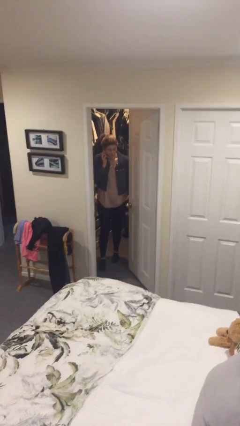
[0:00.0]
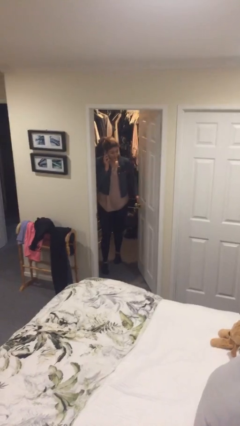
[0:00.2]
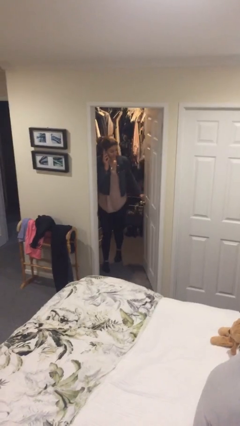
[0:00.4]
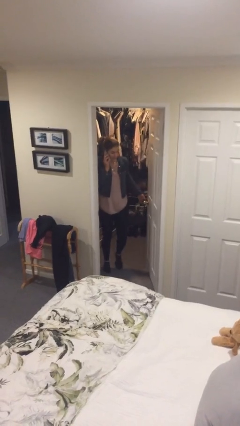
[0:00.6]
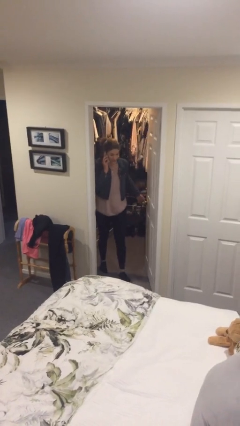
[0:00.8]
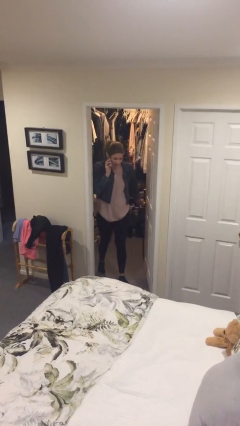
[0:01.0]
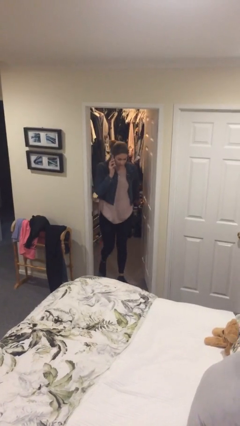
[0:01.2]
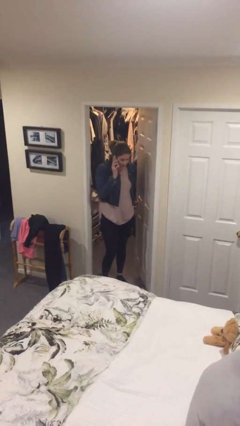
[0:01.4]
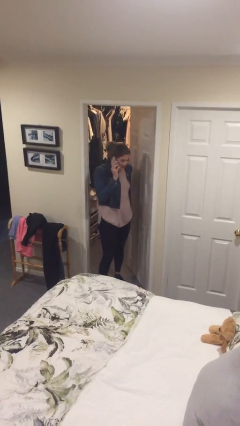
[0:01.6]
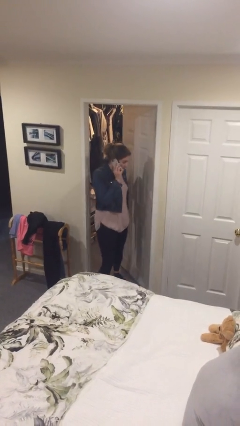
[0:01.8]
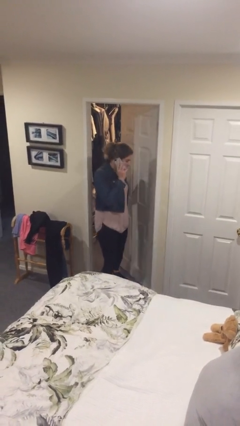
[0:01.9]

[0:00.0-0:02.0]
person enters scene through structure

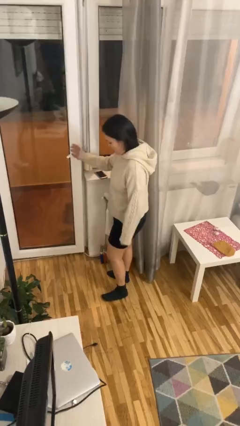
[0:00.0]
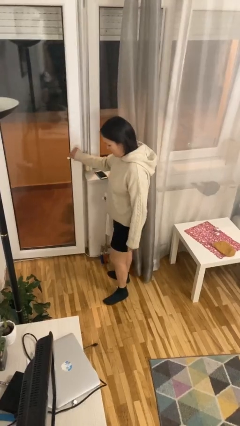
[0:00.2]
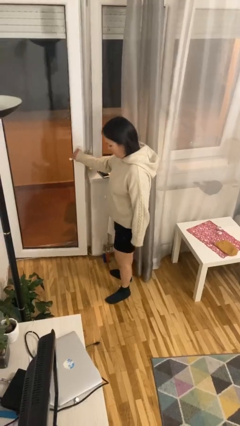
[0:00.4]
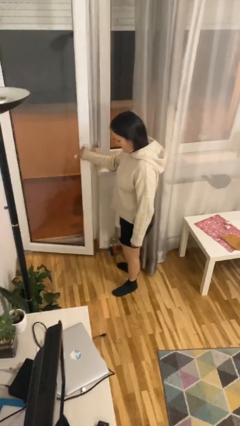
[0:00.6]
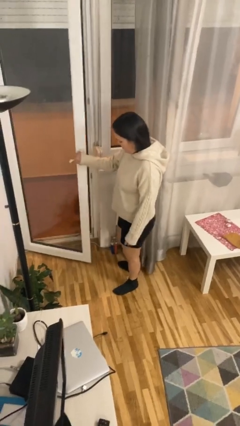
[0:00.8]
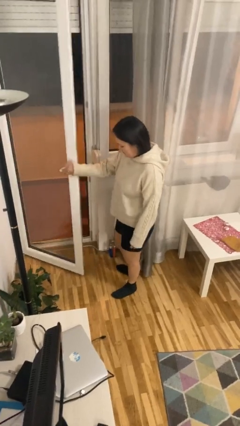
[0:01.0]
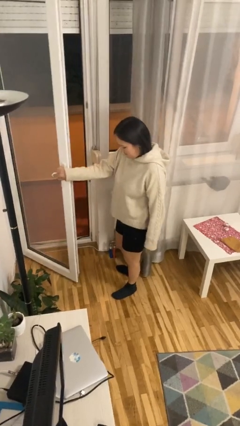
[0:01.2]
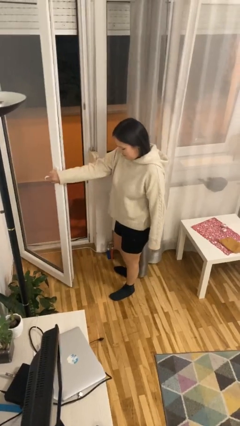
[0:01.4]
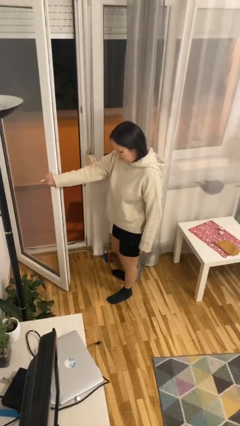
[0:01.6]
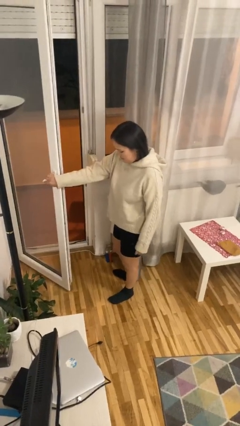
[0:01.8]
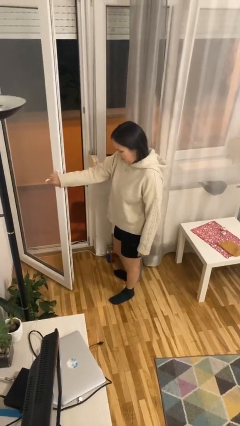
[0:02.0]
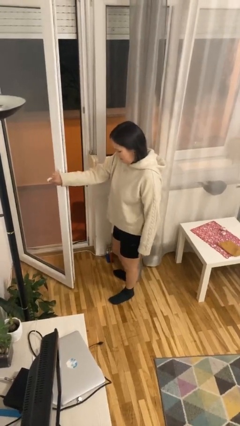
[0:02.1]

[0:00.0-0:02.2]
person opens facility door

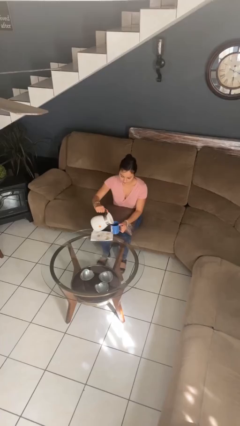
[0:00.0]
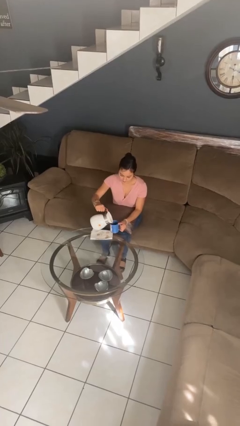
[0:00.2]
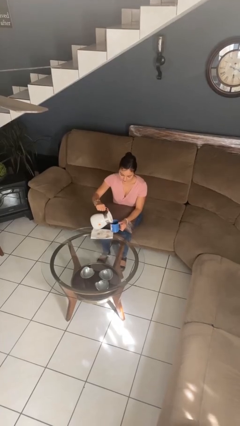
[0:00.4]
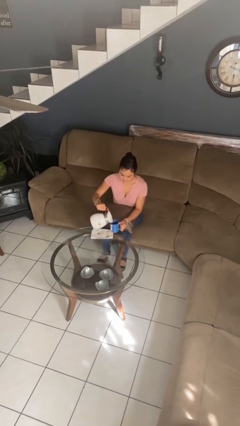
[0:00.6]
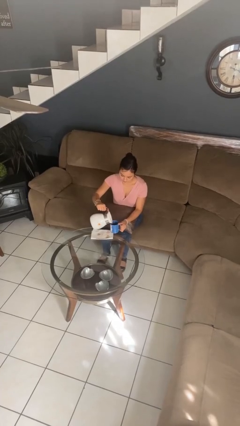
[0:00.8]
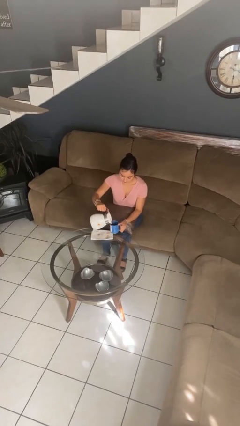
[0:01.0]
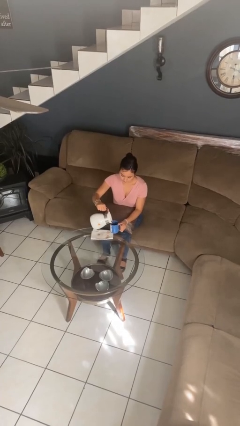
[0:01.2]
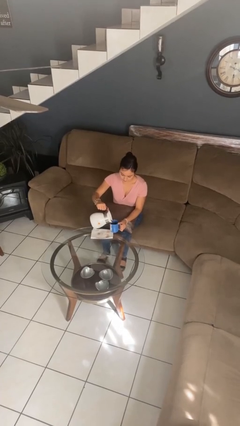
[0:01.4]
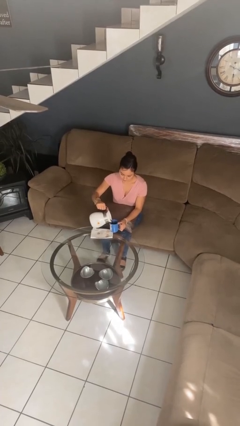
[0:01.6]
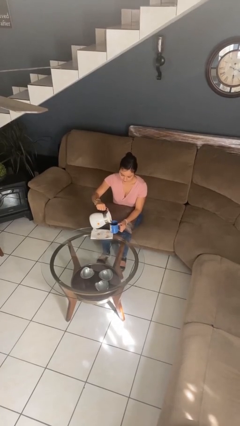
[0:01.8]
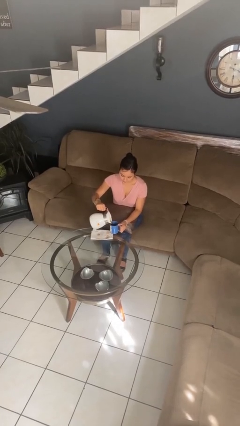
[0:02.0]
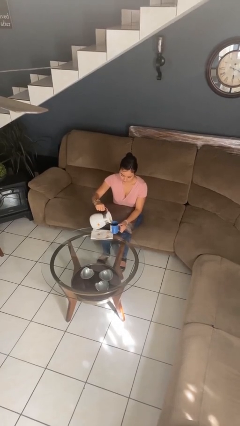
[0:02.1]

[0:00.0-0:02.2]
person pours coffee into mug

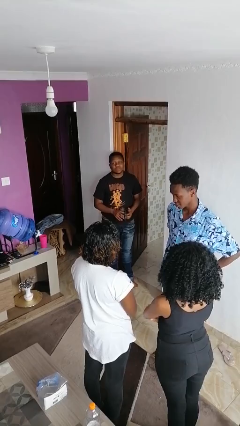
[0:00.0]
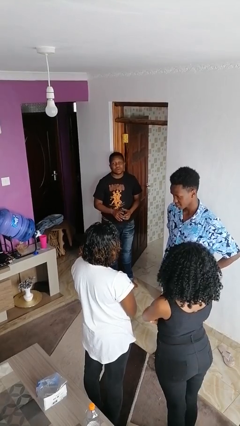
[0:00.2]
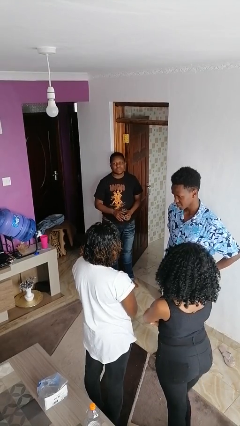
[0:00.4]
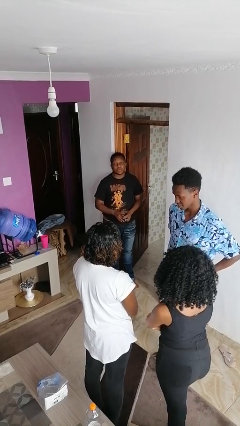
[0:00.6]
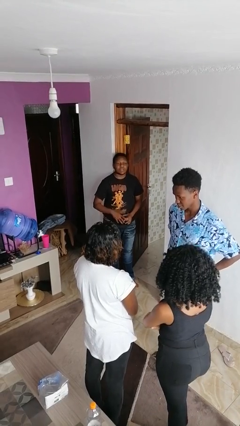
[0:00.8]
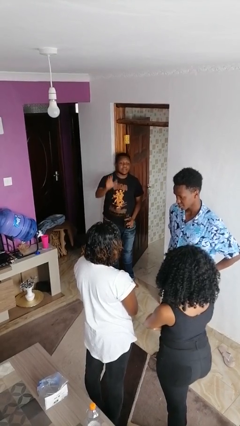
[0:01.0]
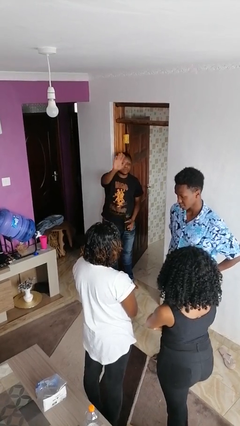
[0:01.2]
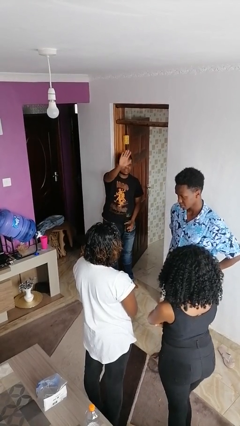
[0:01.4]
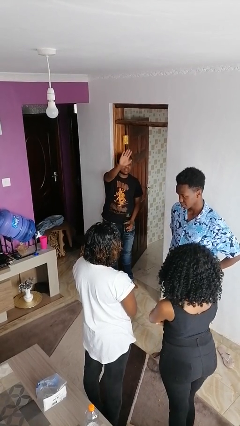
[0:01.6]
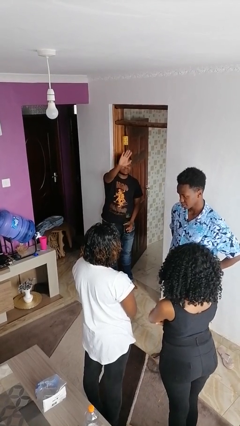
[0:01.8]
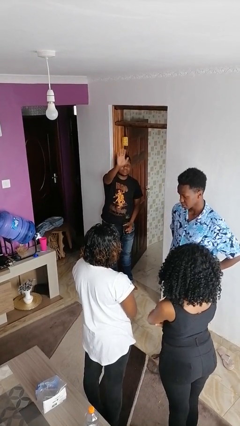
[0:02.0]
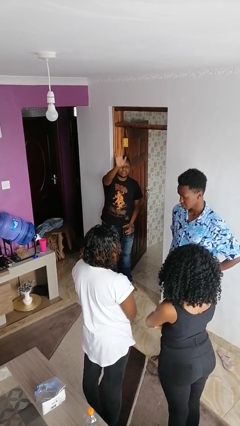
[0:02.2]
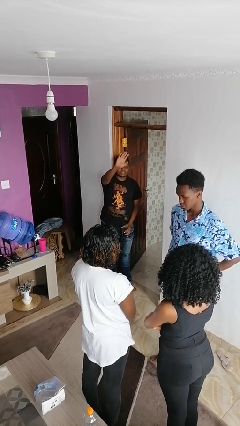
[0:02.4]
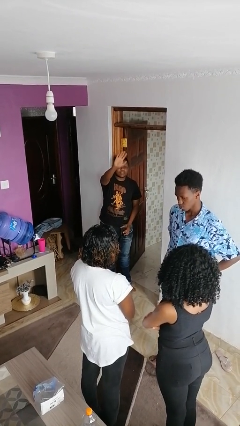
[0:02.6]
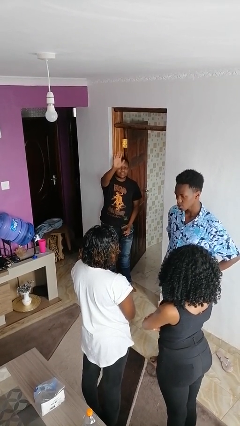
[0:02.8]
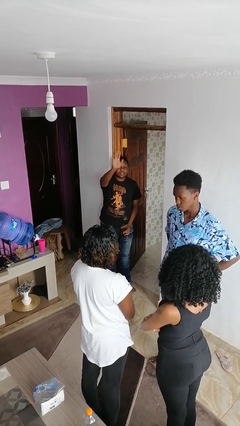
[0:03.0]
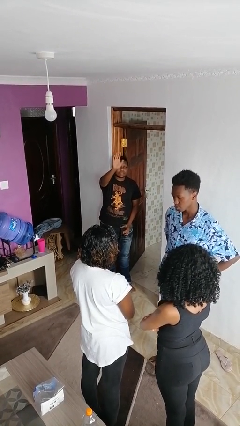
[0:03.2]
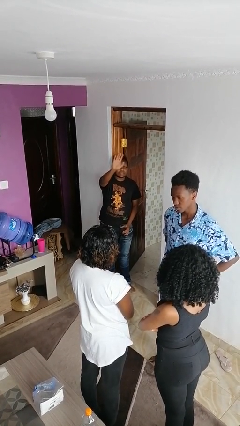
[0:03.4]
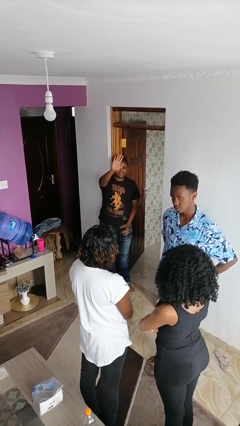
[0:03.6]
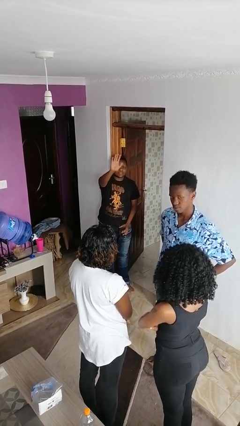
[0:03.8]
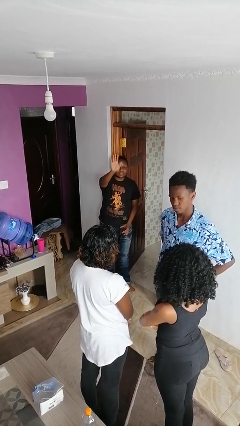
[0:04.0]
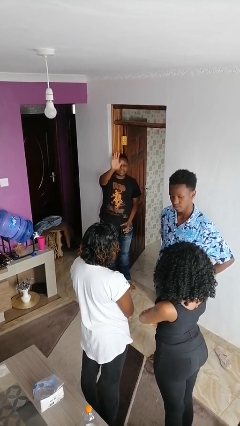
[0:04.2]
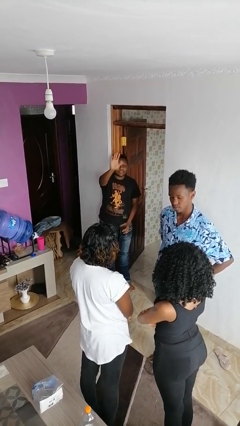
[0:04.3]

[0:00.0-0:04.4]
person waves at person

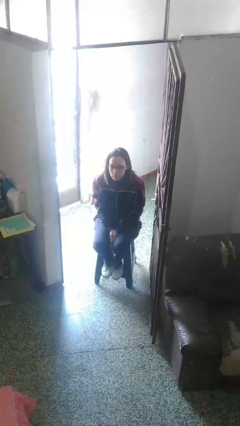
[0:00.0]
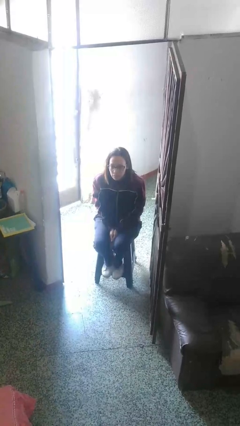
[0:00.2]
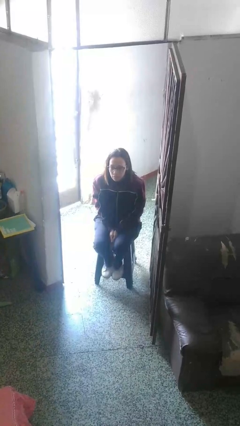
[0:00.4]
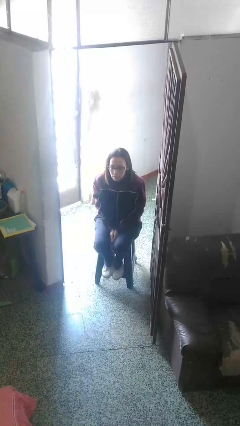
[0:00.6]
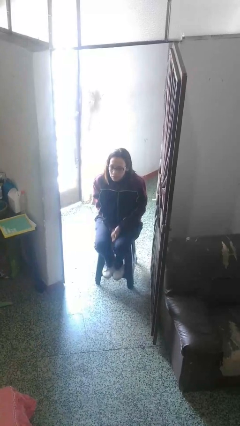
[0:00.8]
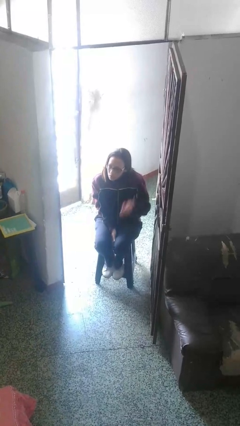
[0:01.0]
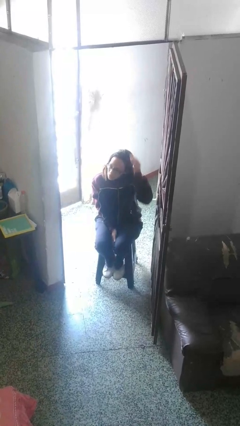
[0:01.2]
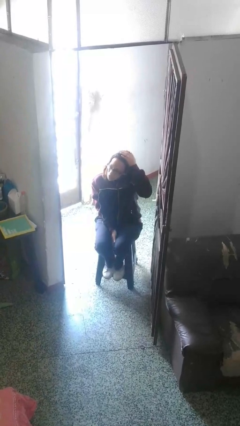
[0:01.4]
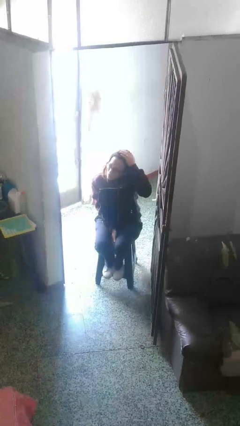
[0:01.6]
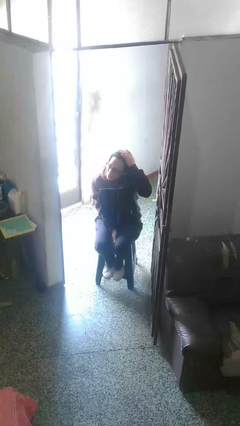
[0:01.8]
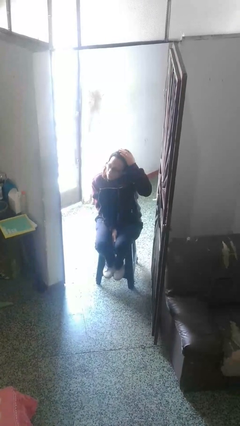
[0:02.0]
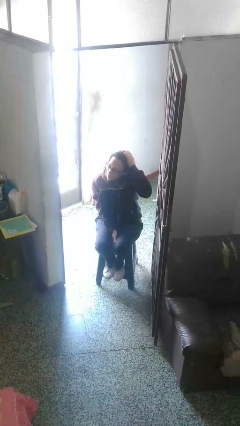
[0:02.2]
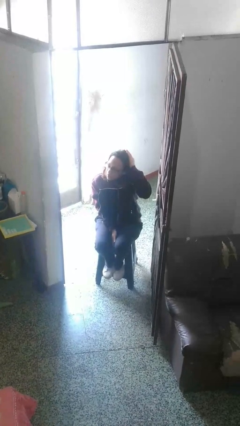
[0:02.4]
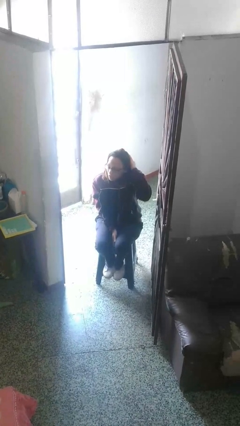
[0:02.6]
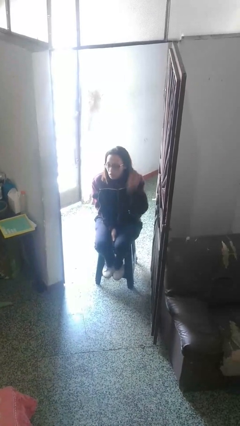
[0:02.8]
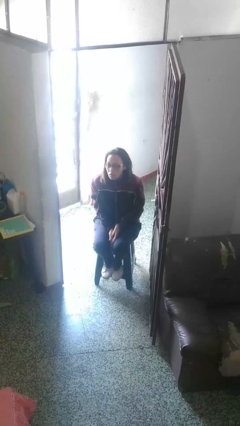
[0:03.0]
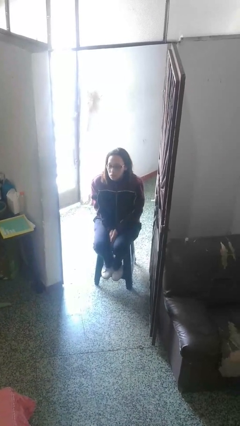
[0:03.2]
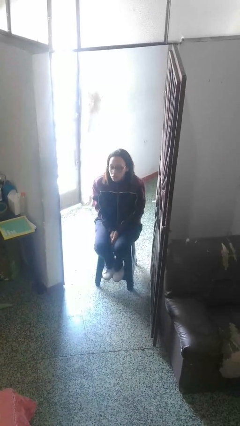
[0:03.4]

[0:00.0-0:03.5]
person pats head

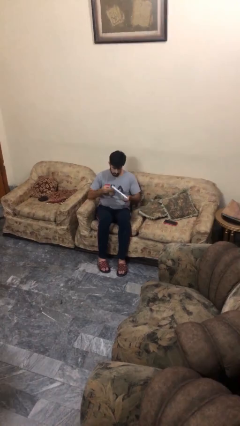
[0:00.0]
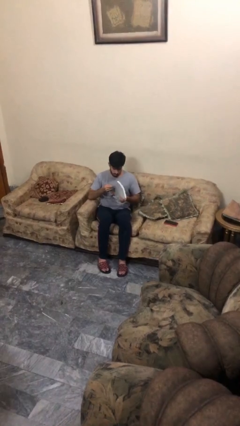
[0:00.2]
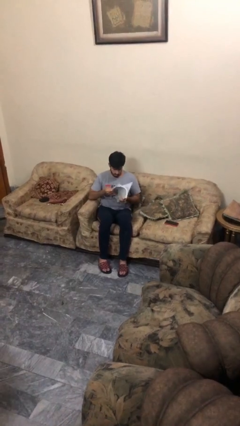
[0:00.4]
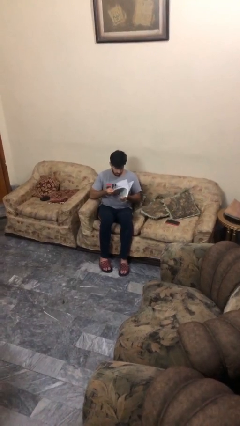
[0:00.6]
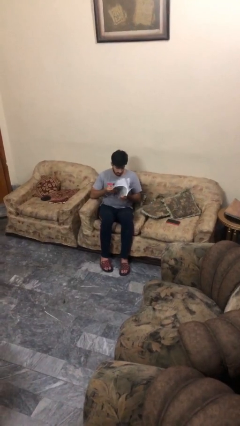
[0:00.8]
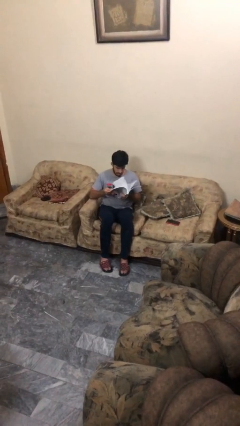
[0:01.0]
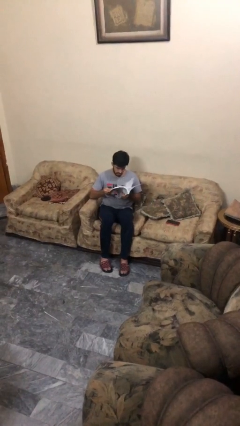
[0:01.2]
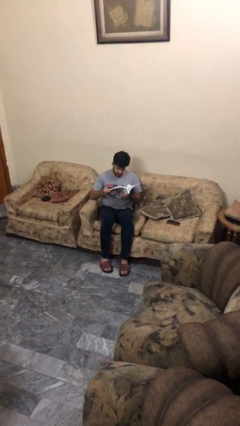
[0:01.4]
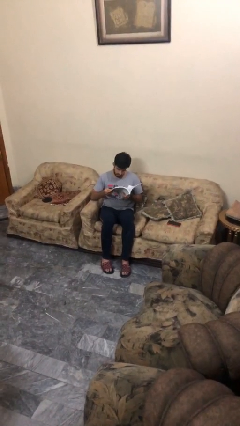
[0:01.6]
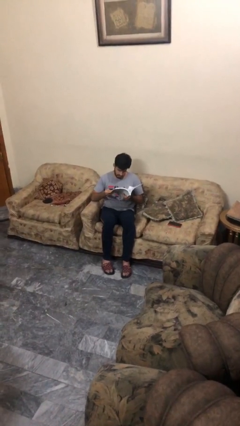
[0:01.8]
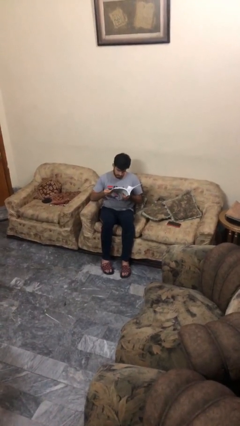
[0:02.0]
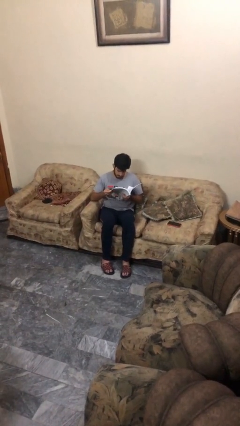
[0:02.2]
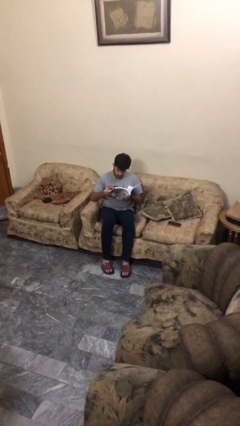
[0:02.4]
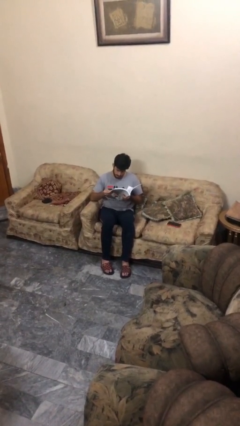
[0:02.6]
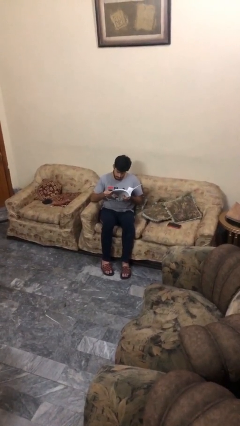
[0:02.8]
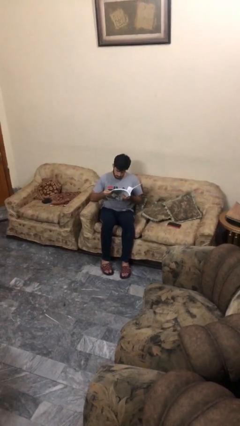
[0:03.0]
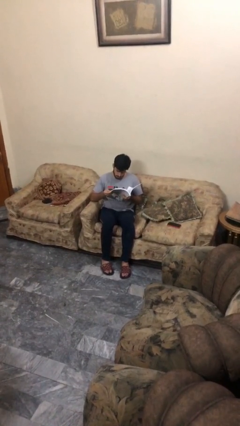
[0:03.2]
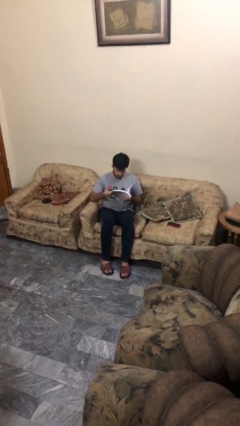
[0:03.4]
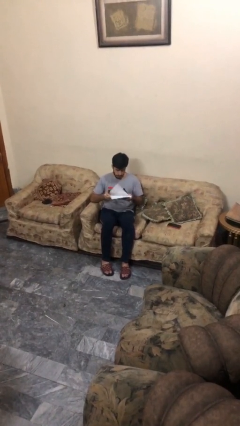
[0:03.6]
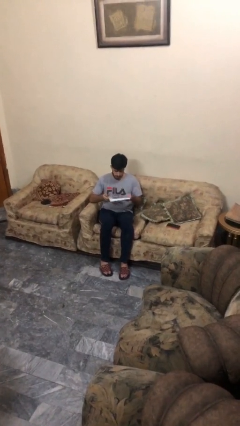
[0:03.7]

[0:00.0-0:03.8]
person reads book
